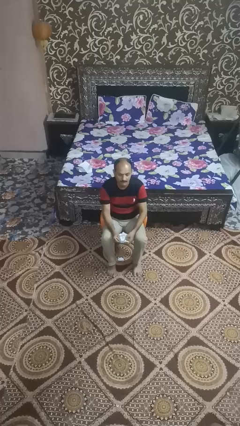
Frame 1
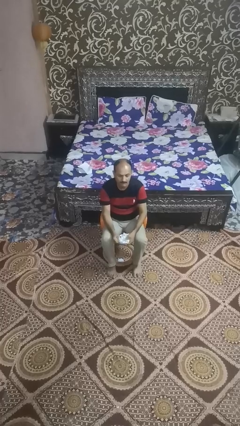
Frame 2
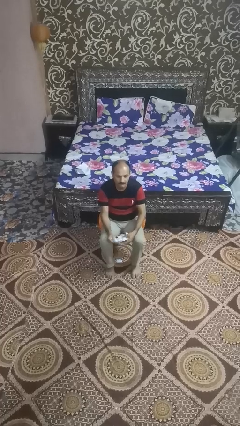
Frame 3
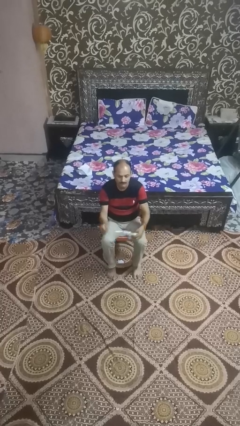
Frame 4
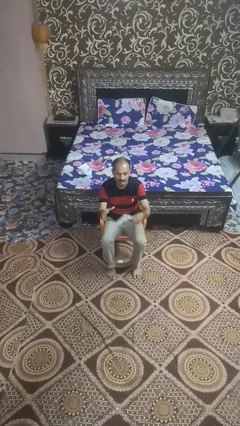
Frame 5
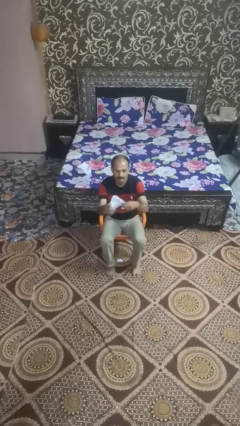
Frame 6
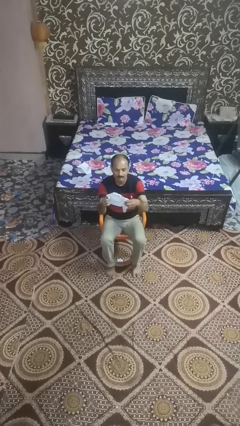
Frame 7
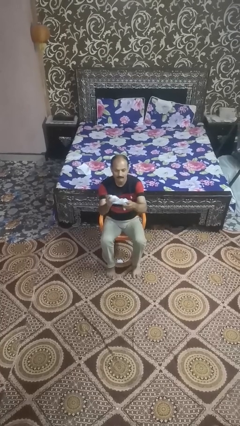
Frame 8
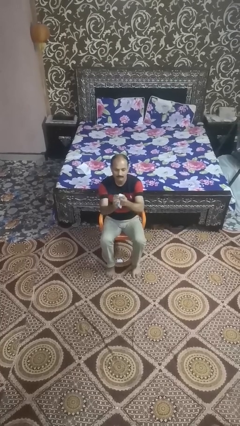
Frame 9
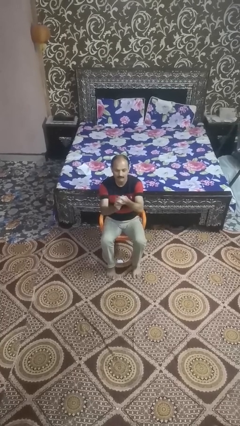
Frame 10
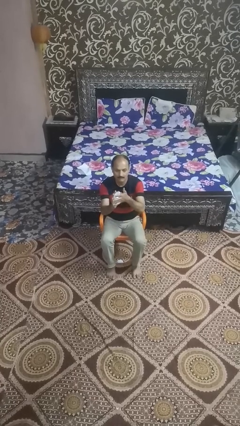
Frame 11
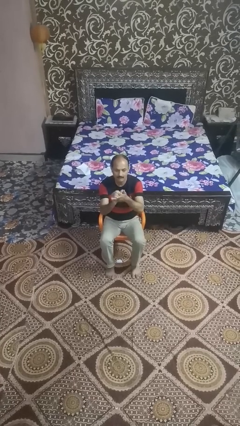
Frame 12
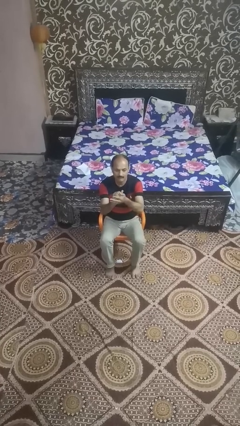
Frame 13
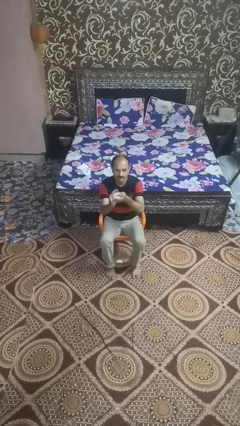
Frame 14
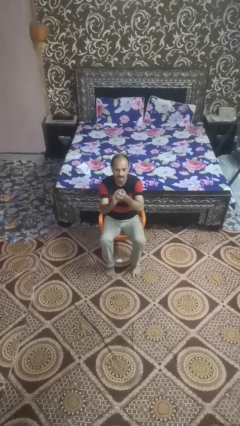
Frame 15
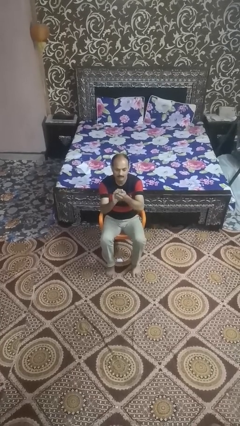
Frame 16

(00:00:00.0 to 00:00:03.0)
person crumples paper

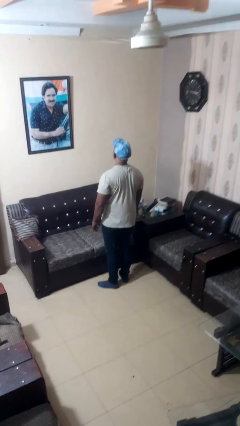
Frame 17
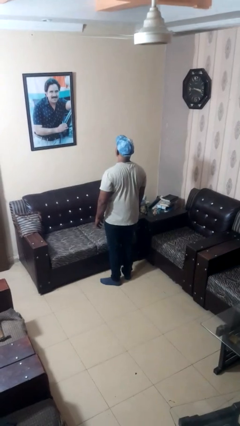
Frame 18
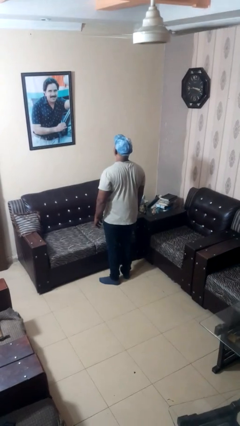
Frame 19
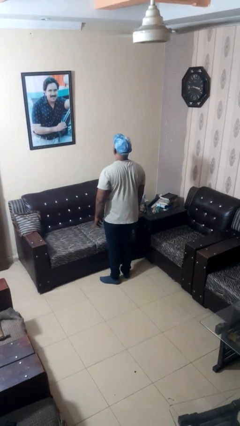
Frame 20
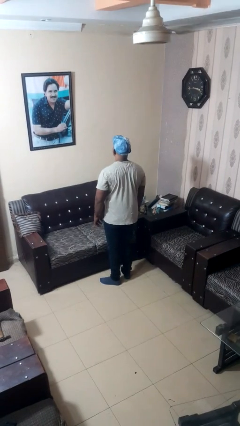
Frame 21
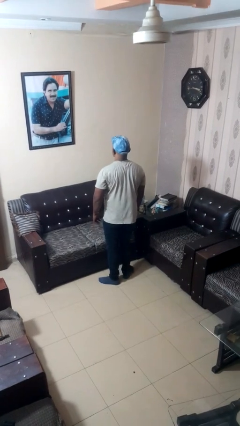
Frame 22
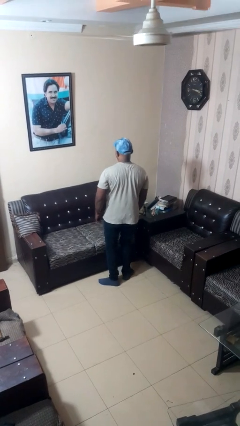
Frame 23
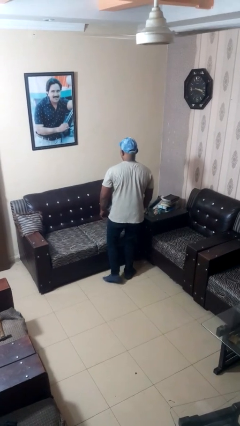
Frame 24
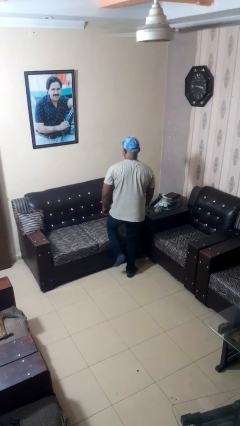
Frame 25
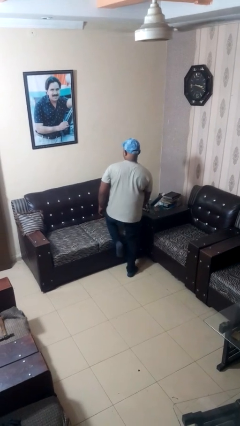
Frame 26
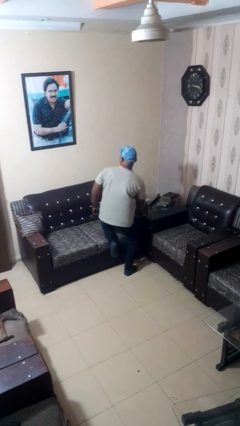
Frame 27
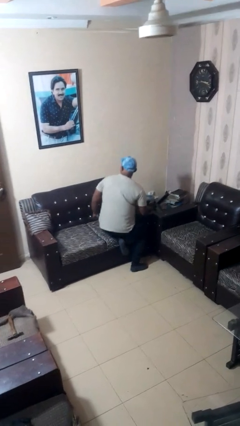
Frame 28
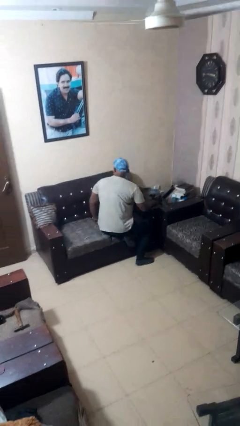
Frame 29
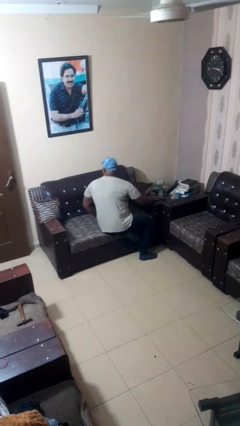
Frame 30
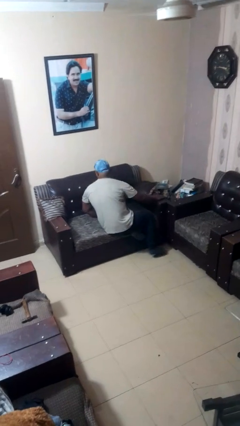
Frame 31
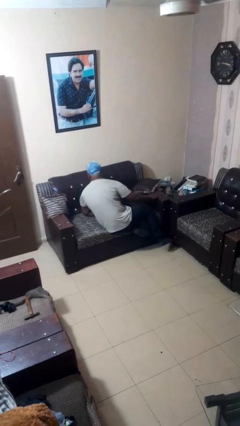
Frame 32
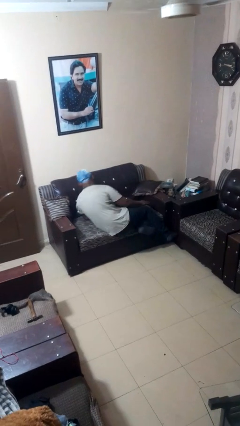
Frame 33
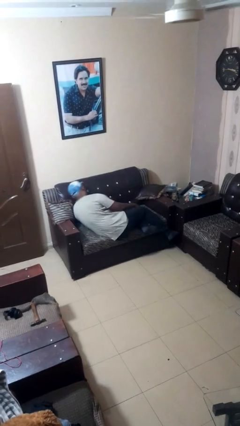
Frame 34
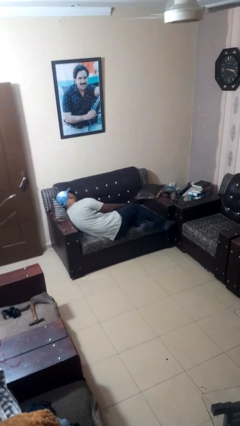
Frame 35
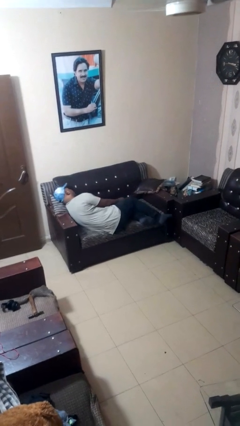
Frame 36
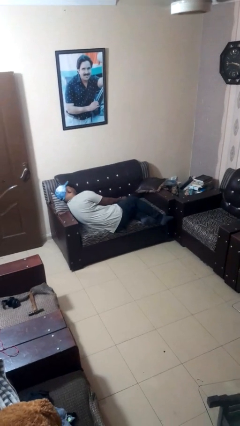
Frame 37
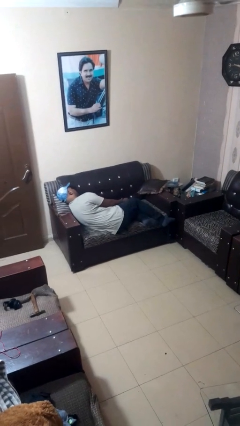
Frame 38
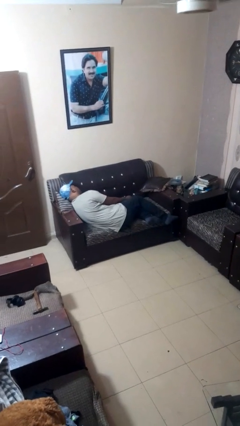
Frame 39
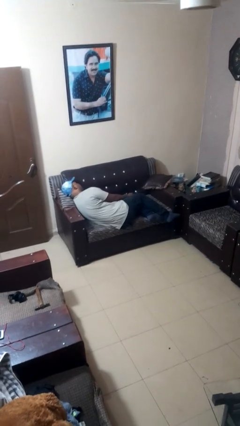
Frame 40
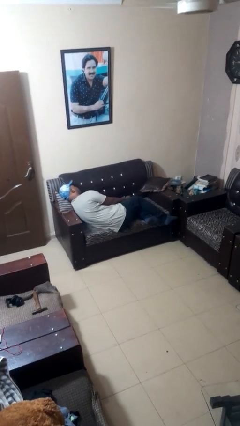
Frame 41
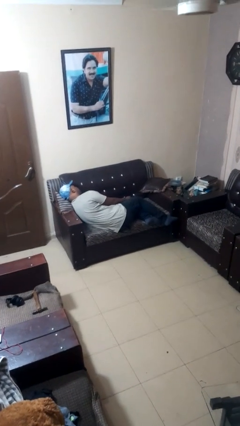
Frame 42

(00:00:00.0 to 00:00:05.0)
person lies down on couch

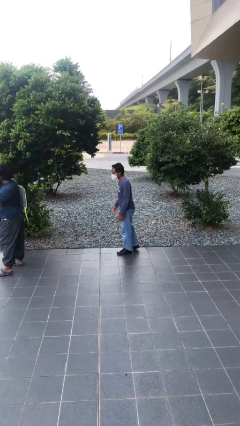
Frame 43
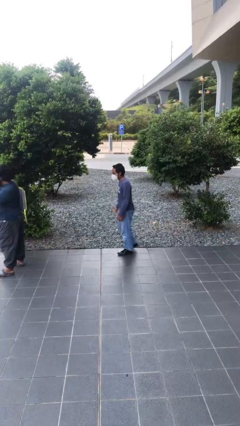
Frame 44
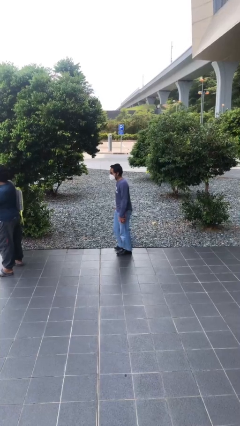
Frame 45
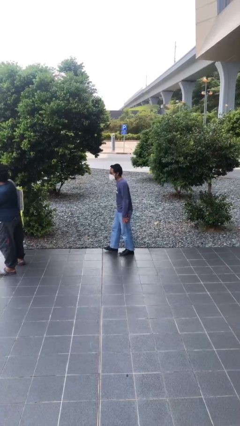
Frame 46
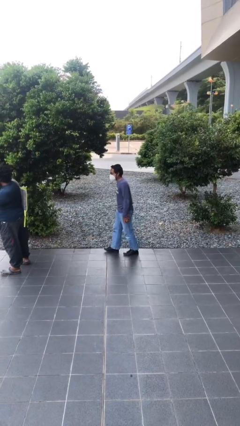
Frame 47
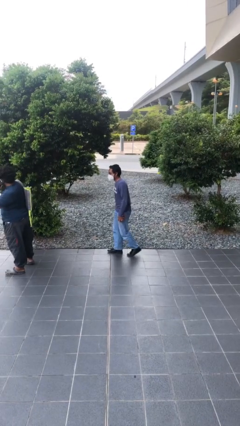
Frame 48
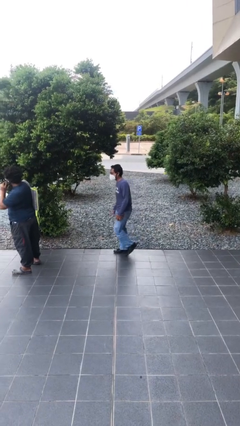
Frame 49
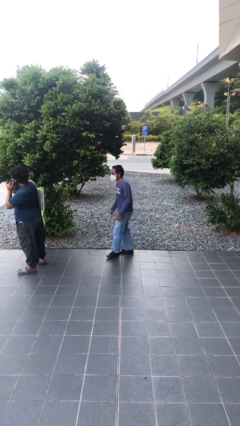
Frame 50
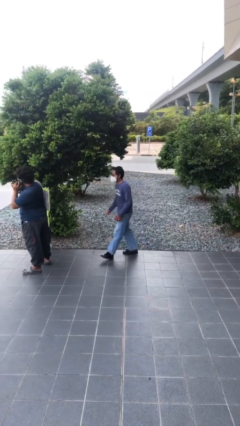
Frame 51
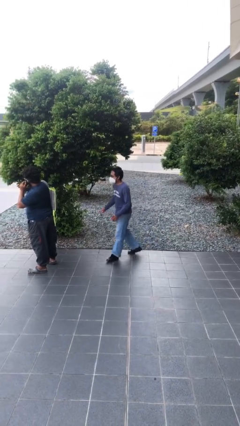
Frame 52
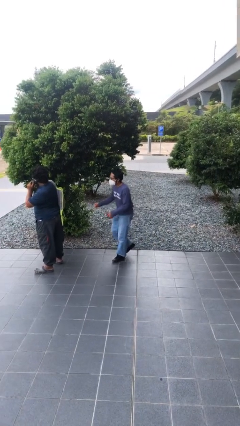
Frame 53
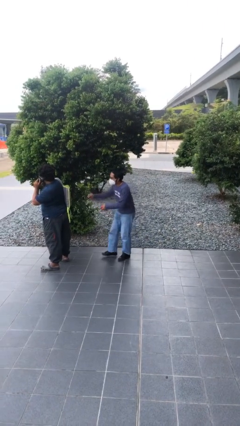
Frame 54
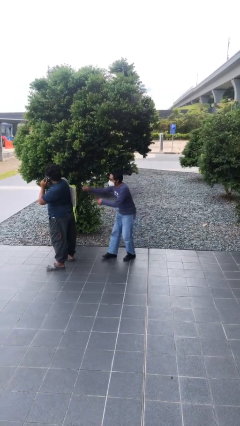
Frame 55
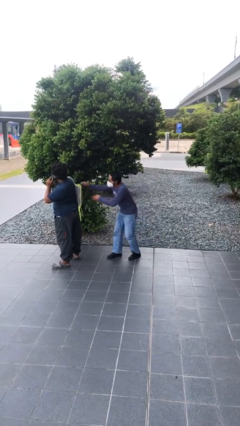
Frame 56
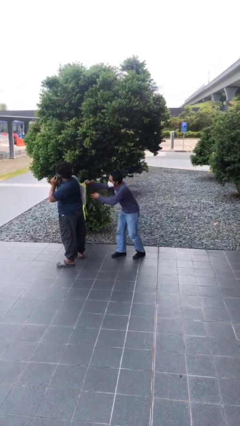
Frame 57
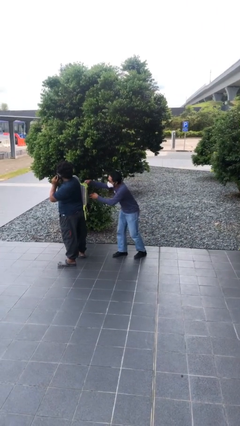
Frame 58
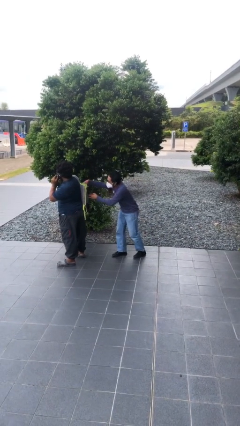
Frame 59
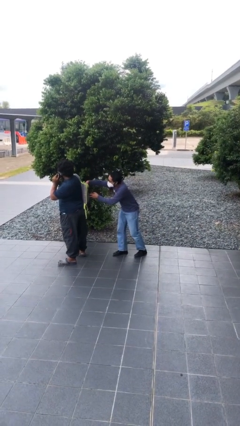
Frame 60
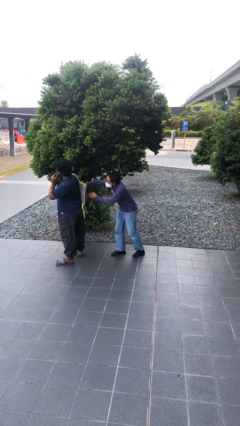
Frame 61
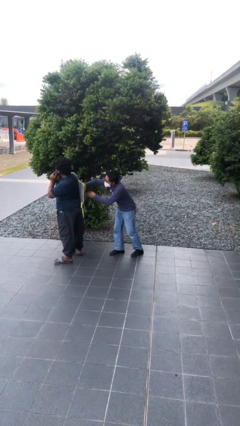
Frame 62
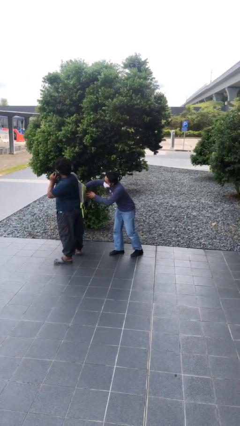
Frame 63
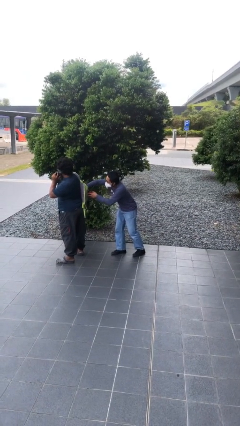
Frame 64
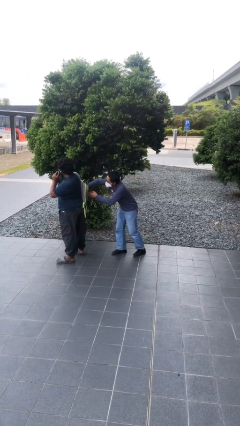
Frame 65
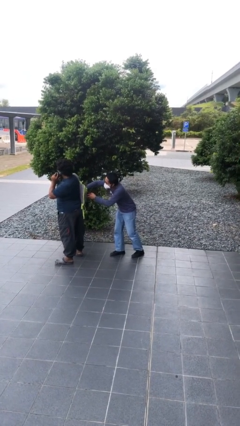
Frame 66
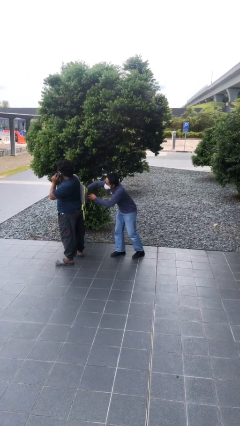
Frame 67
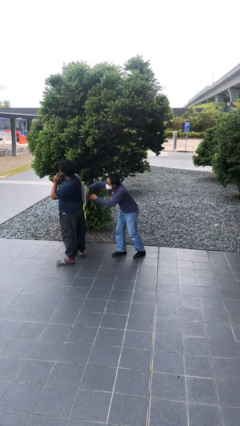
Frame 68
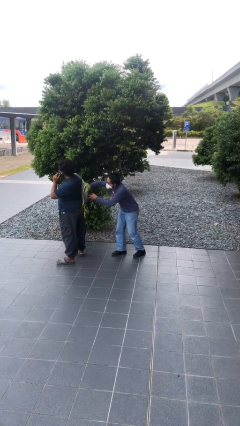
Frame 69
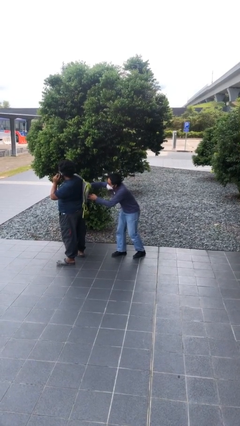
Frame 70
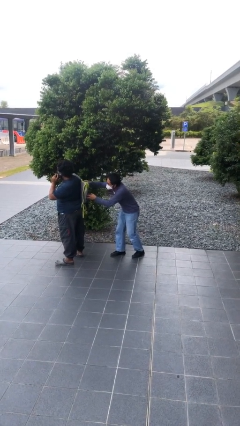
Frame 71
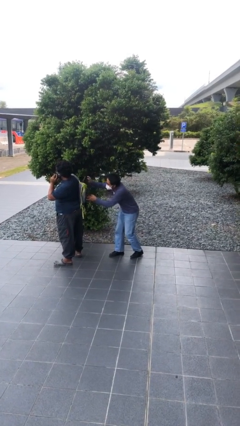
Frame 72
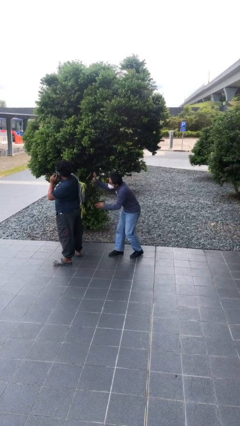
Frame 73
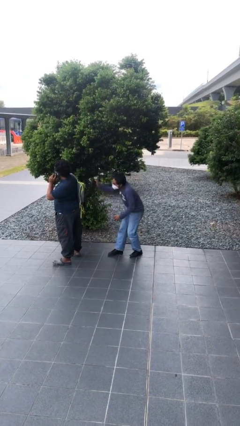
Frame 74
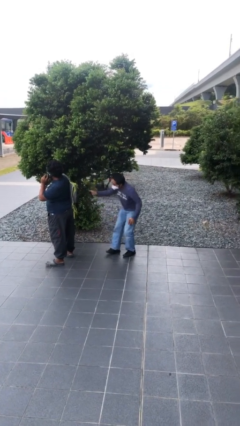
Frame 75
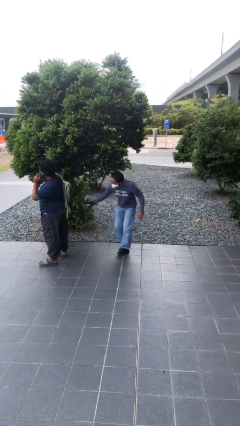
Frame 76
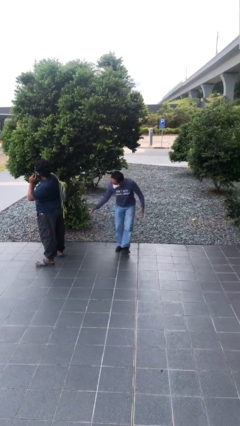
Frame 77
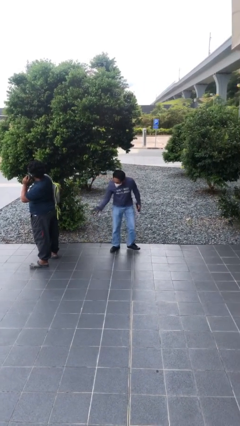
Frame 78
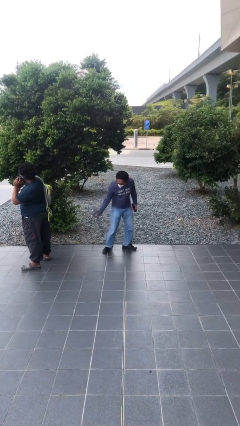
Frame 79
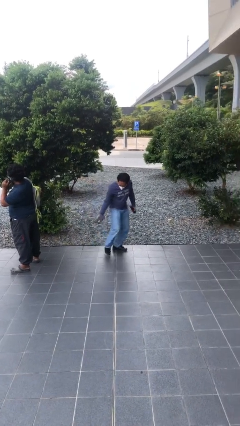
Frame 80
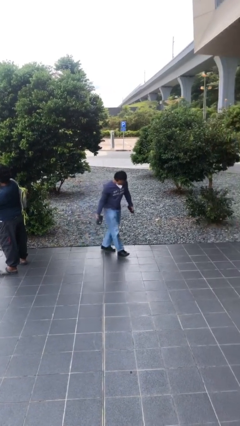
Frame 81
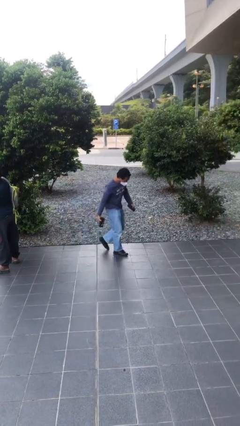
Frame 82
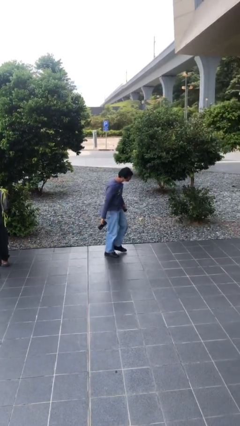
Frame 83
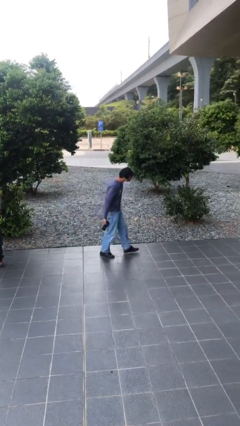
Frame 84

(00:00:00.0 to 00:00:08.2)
person steals object from person

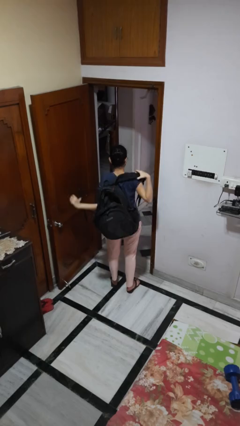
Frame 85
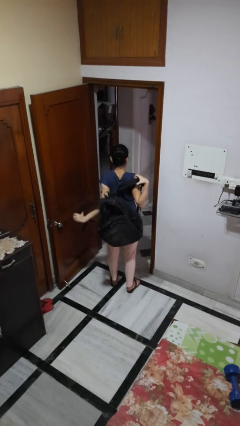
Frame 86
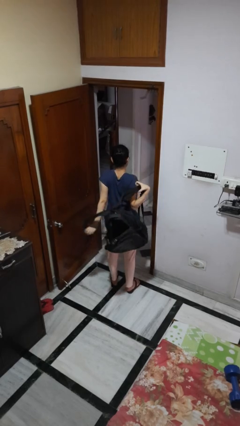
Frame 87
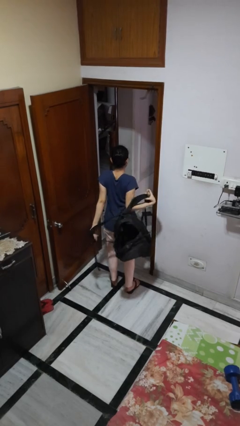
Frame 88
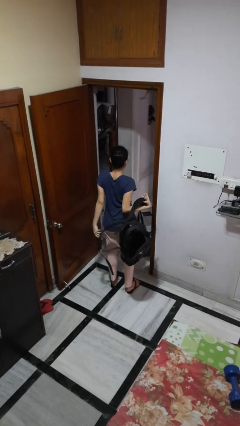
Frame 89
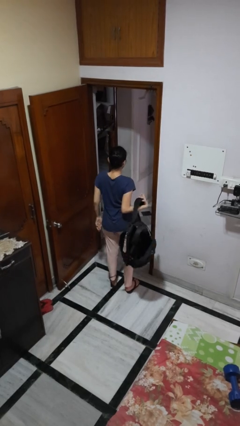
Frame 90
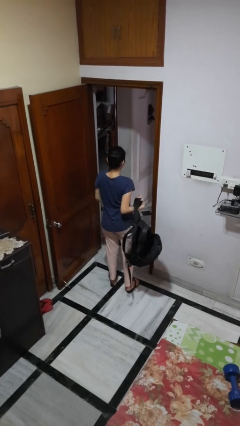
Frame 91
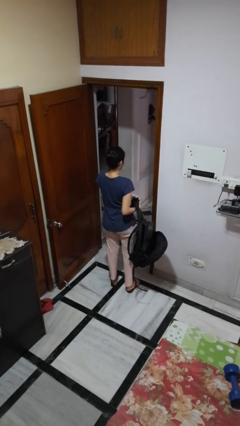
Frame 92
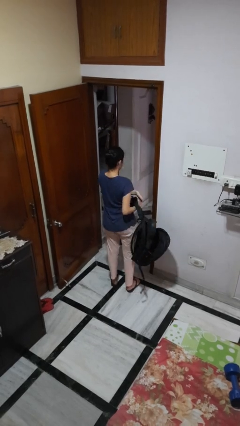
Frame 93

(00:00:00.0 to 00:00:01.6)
person takes off backpack
